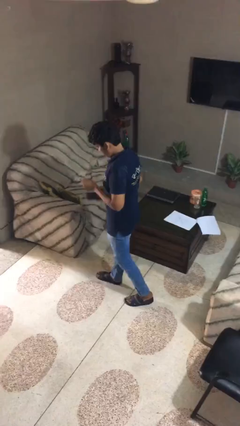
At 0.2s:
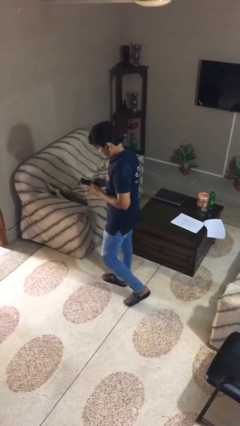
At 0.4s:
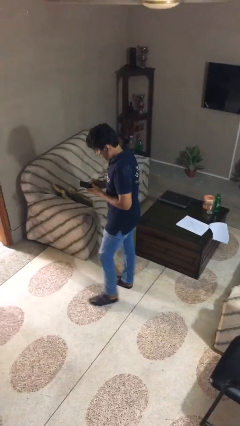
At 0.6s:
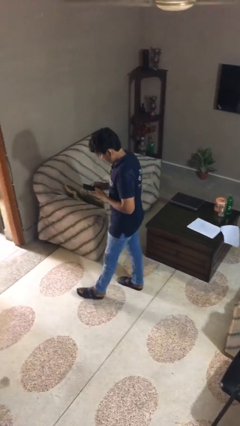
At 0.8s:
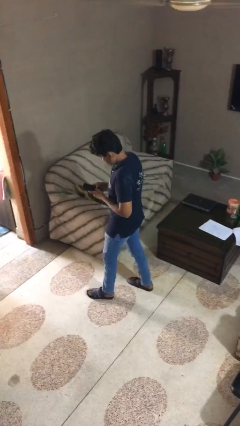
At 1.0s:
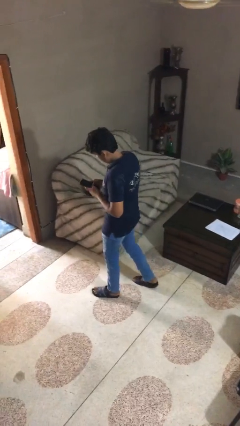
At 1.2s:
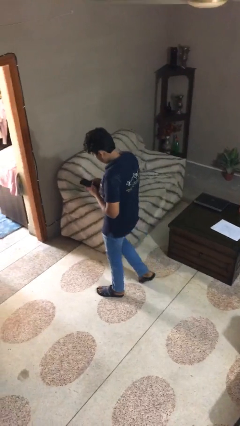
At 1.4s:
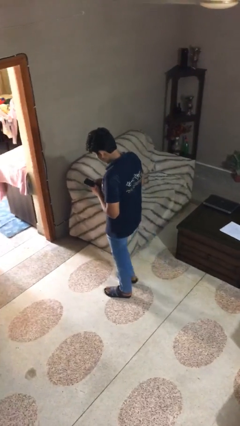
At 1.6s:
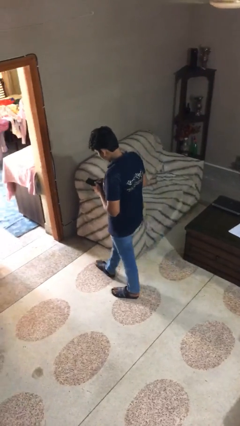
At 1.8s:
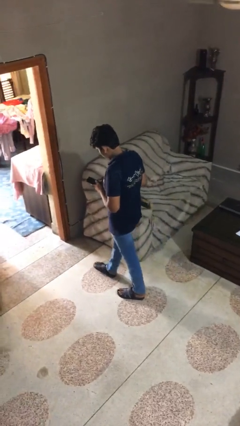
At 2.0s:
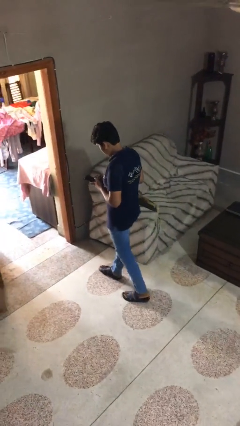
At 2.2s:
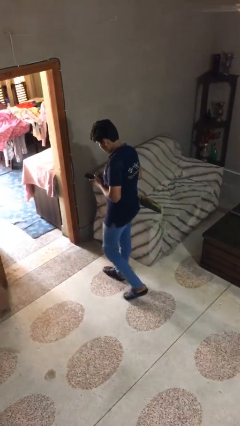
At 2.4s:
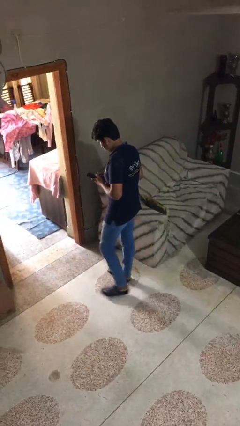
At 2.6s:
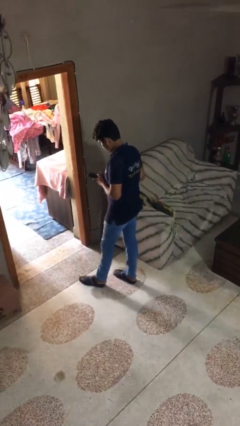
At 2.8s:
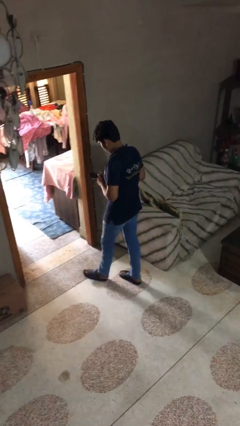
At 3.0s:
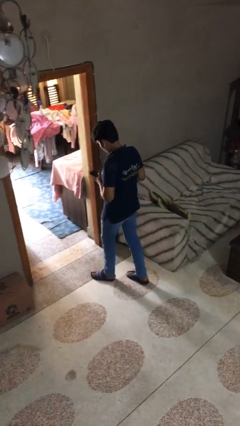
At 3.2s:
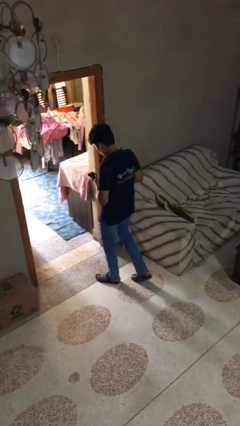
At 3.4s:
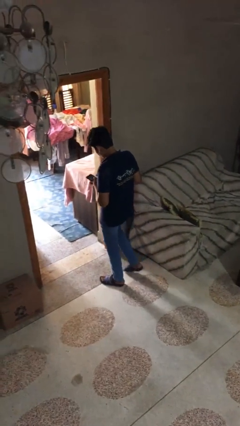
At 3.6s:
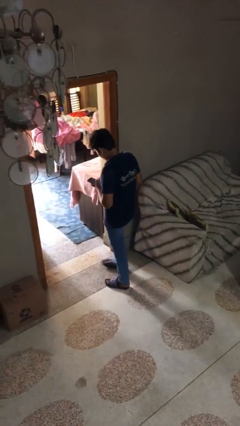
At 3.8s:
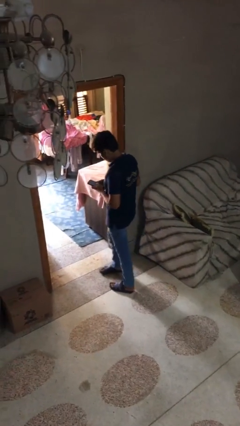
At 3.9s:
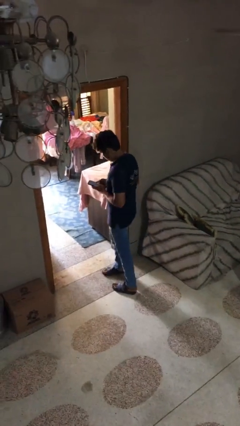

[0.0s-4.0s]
person texts on phone

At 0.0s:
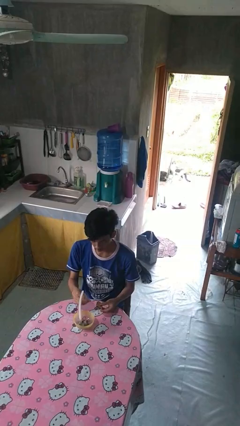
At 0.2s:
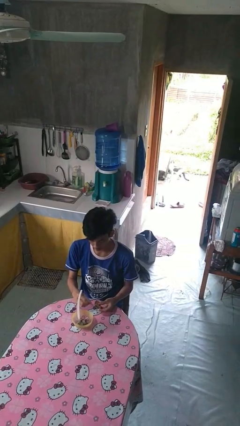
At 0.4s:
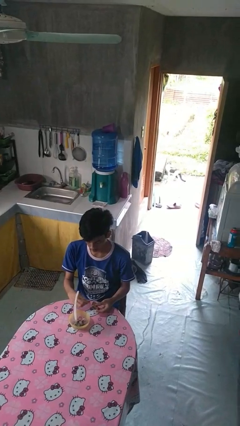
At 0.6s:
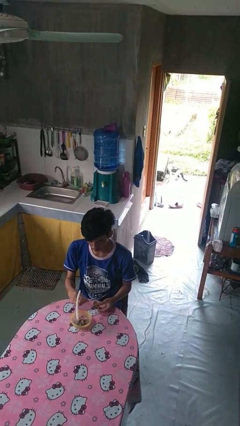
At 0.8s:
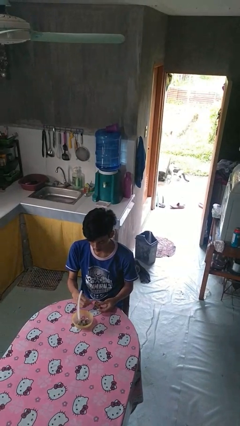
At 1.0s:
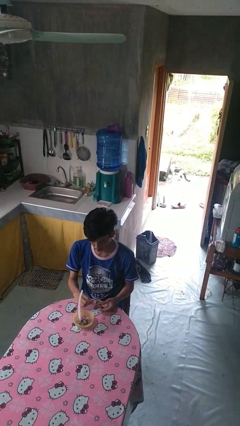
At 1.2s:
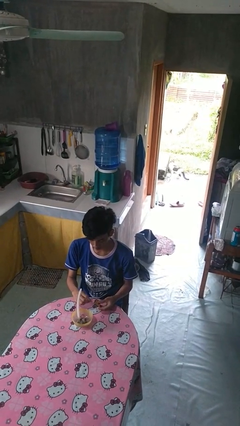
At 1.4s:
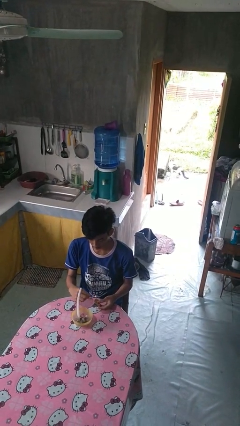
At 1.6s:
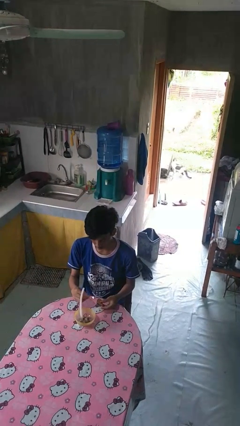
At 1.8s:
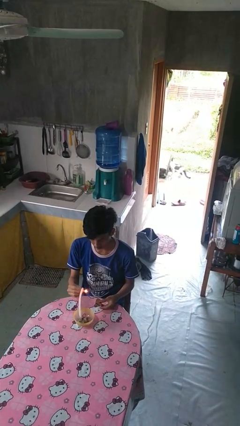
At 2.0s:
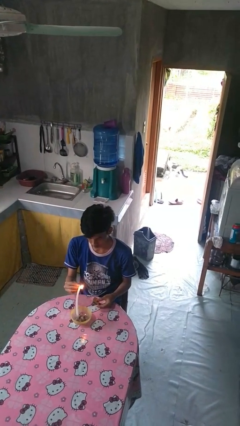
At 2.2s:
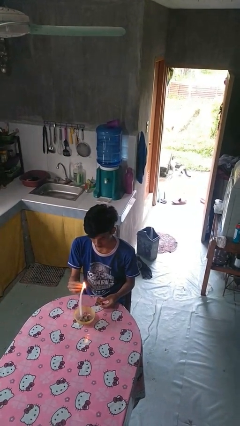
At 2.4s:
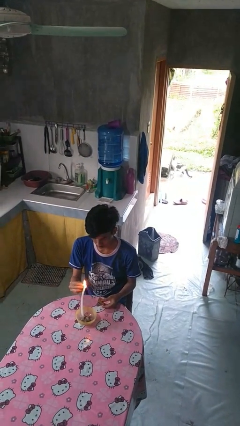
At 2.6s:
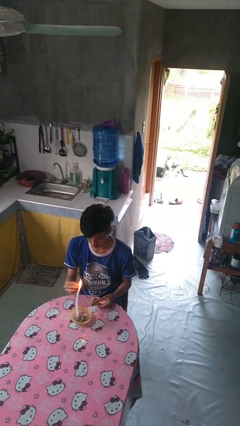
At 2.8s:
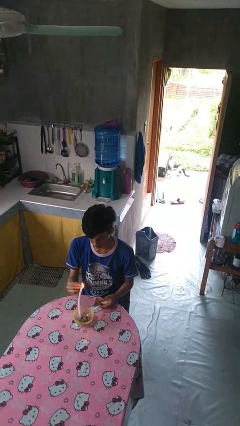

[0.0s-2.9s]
person lights candle

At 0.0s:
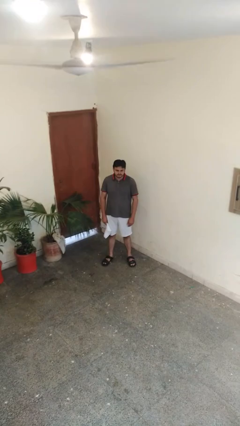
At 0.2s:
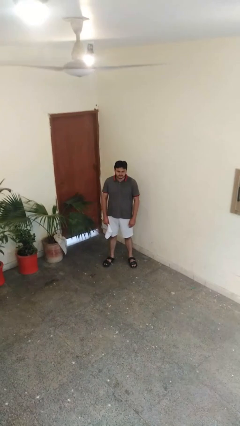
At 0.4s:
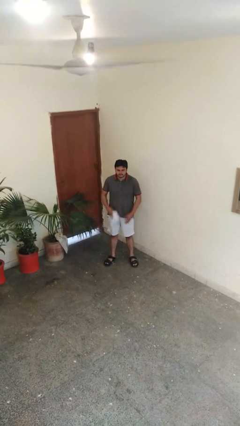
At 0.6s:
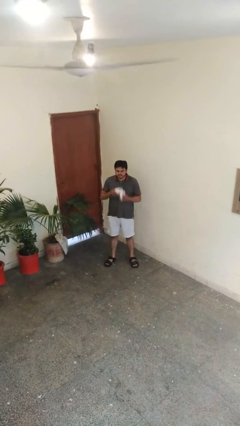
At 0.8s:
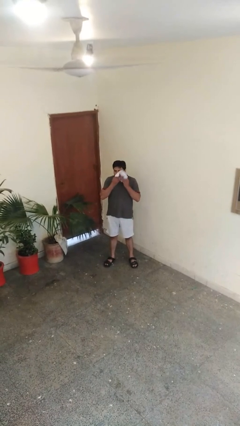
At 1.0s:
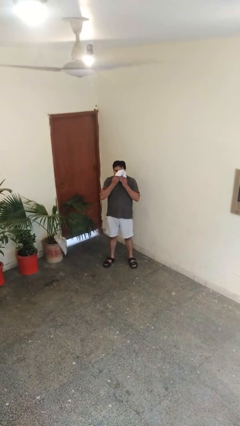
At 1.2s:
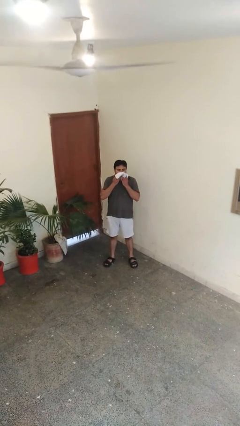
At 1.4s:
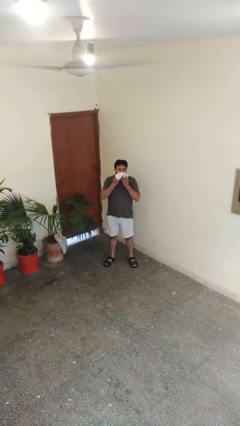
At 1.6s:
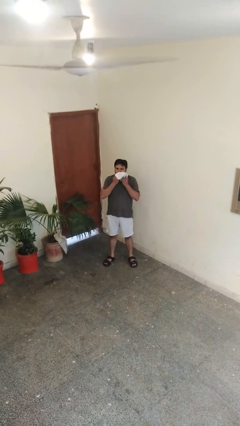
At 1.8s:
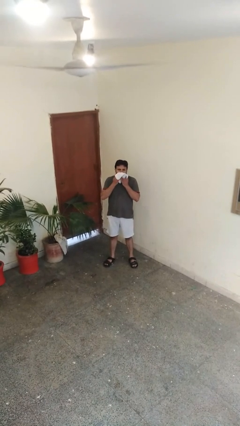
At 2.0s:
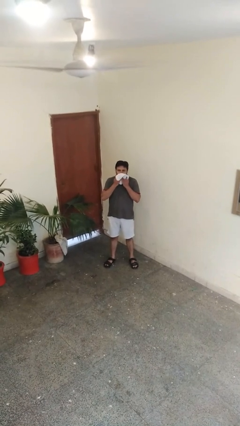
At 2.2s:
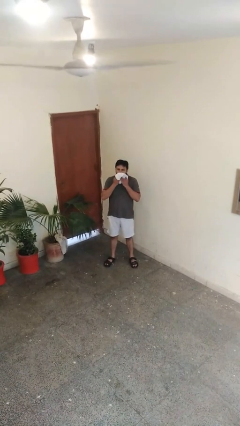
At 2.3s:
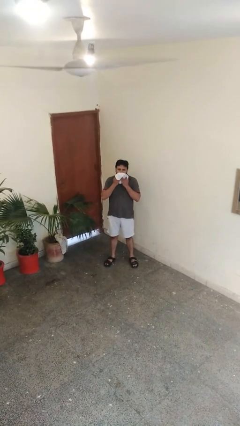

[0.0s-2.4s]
person wipes mouth with napkin

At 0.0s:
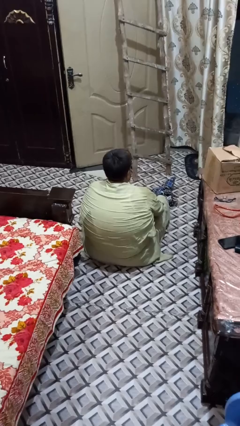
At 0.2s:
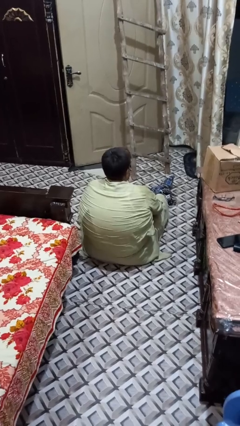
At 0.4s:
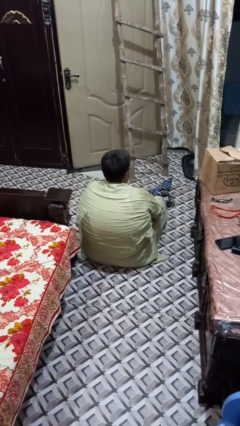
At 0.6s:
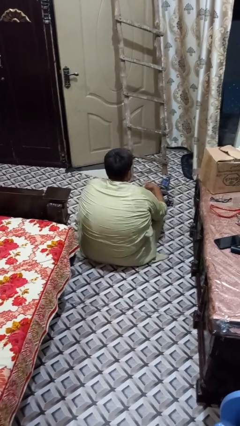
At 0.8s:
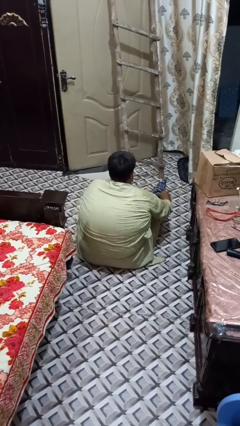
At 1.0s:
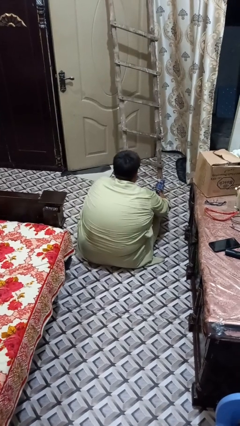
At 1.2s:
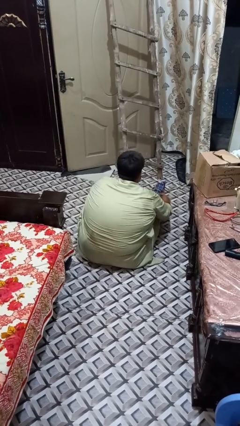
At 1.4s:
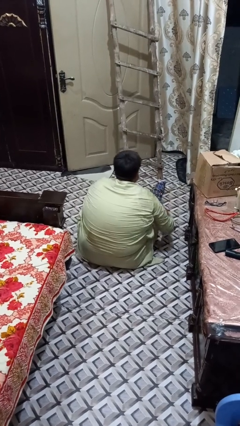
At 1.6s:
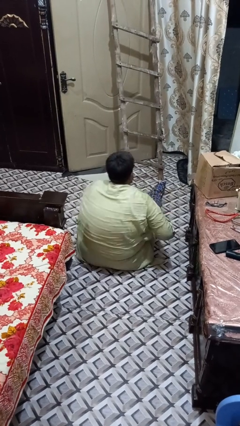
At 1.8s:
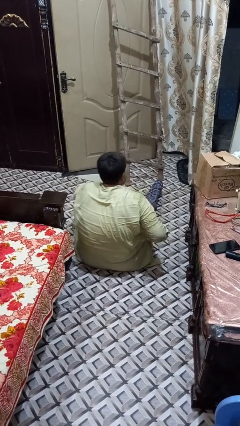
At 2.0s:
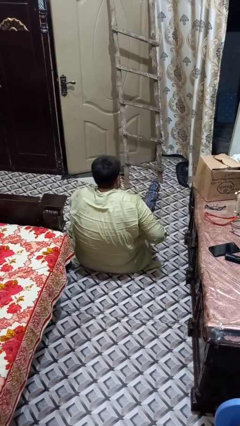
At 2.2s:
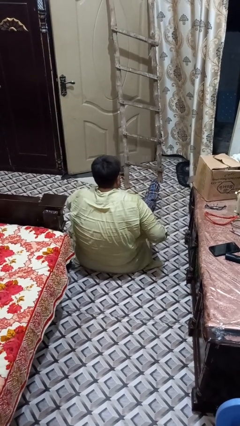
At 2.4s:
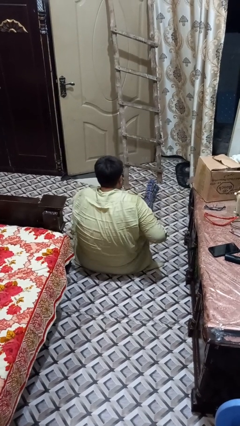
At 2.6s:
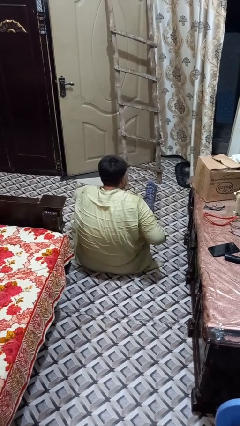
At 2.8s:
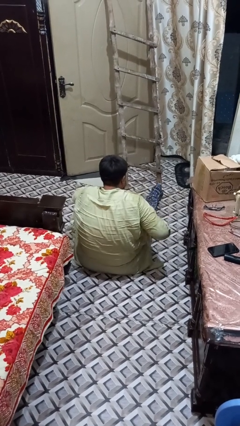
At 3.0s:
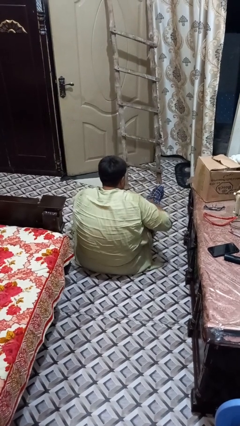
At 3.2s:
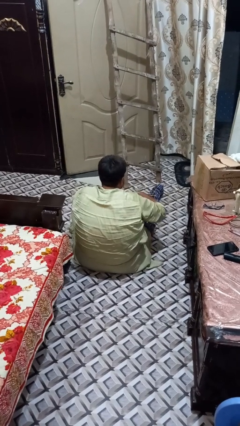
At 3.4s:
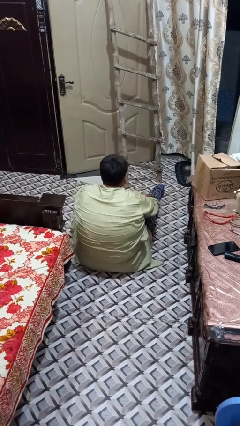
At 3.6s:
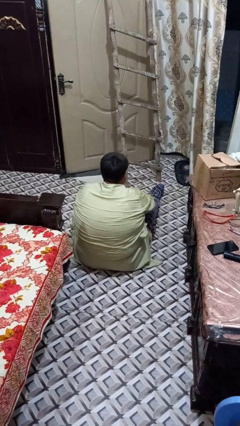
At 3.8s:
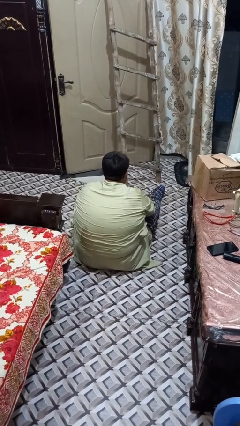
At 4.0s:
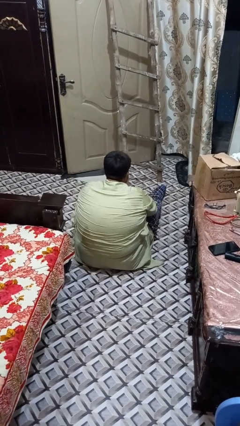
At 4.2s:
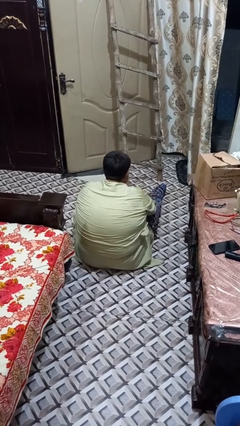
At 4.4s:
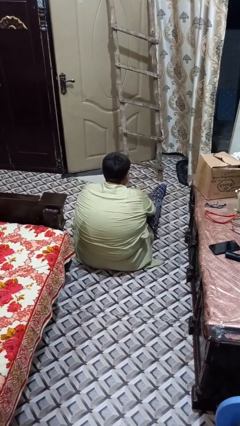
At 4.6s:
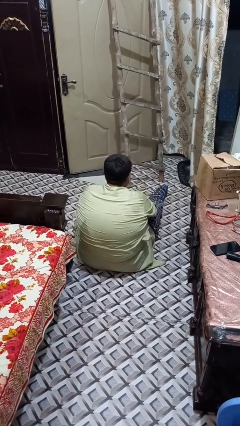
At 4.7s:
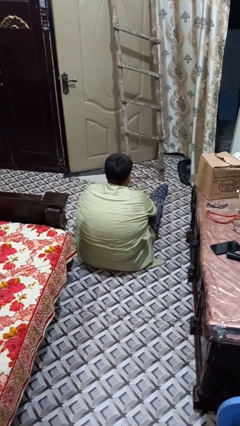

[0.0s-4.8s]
person puts on pants

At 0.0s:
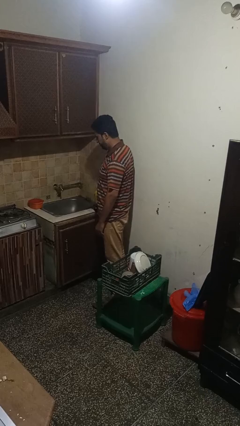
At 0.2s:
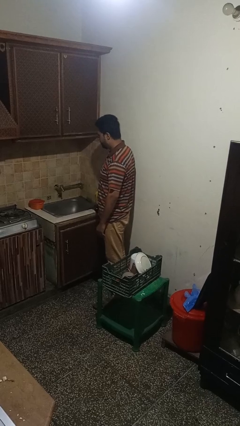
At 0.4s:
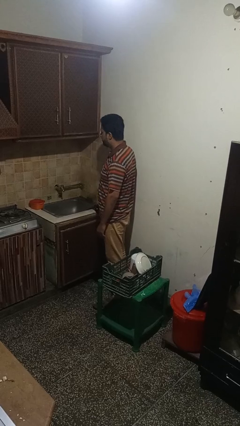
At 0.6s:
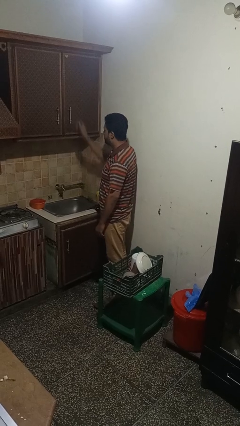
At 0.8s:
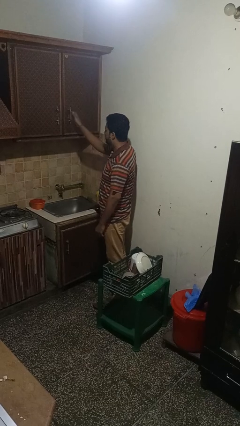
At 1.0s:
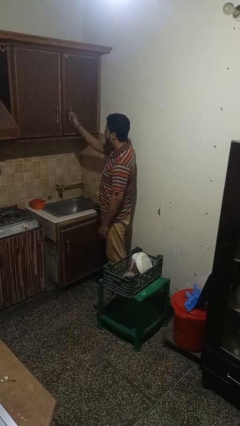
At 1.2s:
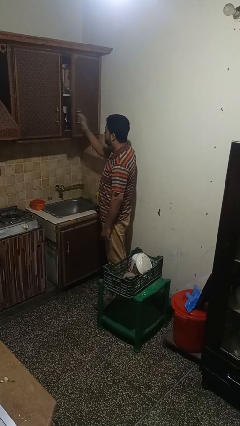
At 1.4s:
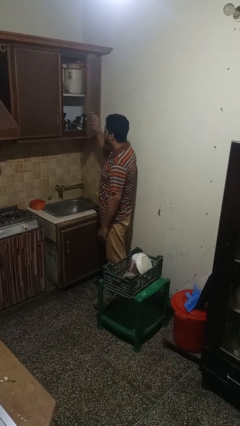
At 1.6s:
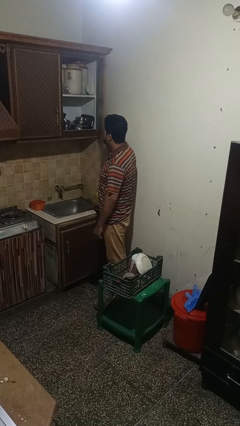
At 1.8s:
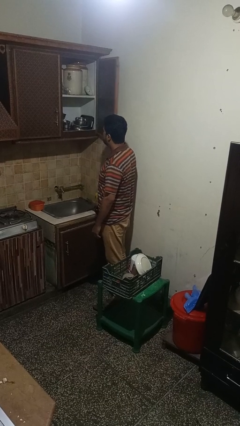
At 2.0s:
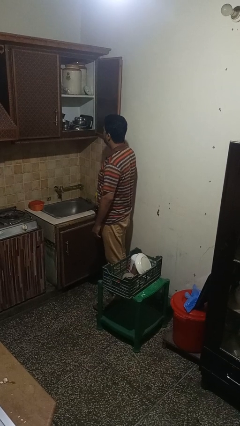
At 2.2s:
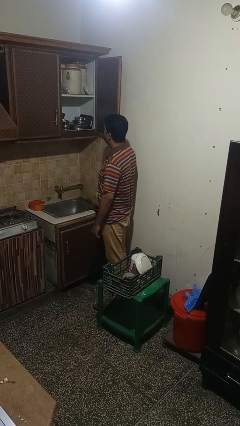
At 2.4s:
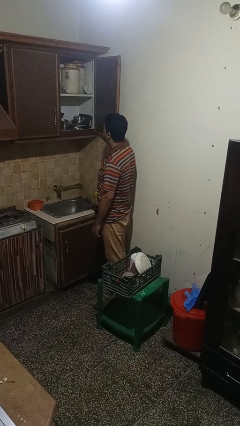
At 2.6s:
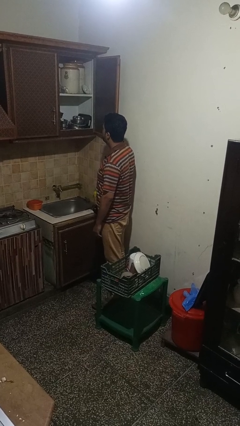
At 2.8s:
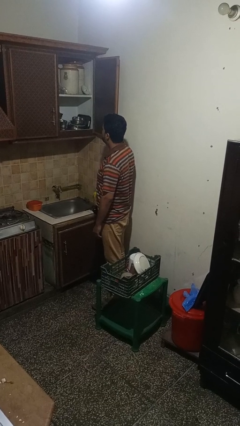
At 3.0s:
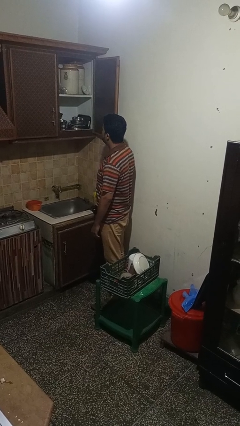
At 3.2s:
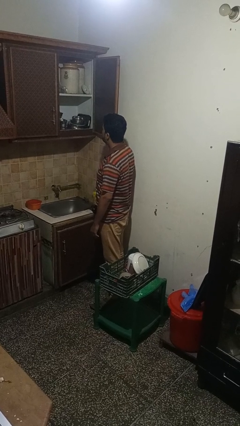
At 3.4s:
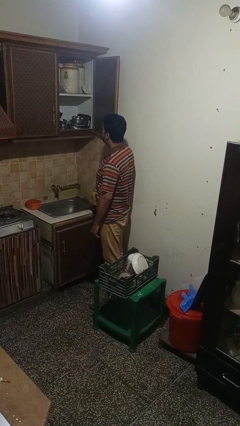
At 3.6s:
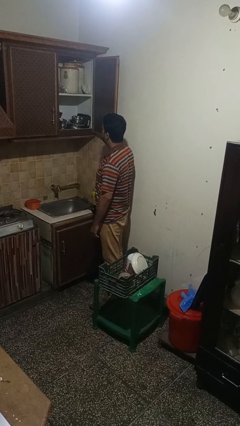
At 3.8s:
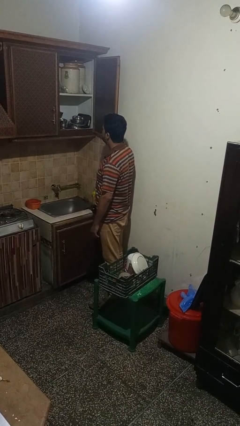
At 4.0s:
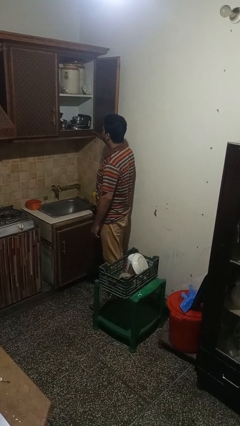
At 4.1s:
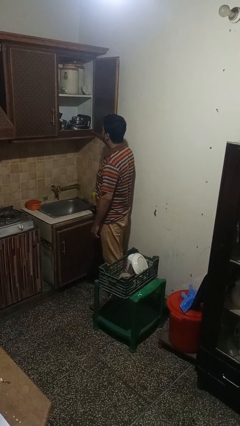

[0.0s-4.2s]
person opens cabinet
